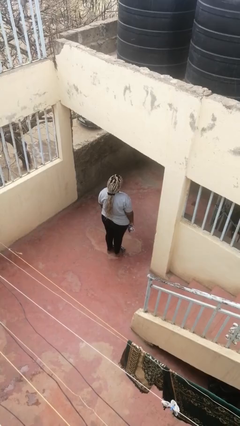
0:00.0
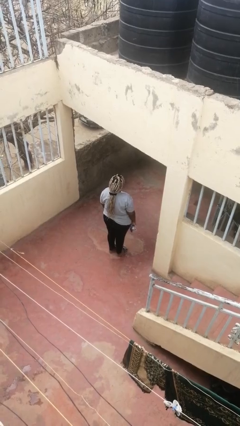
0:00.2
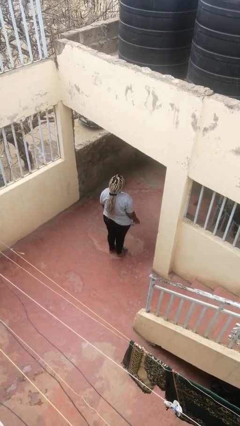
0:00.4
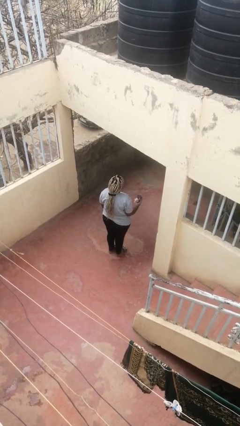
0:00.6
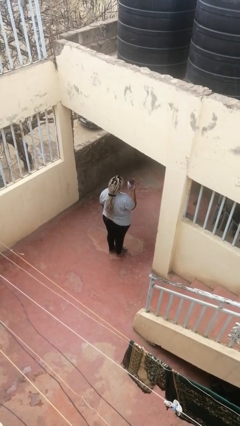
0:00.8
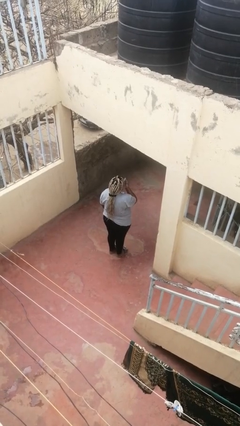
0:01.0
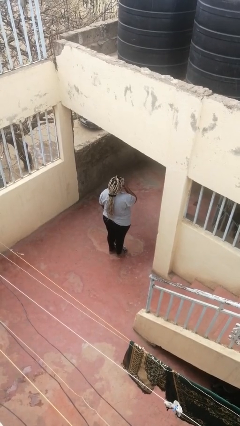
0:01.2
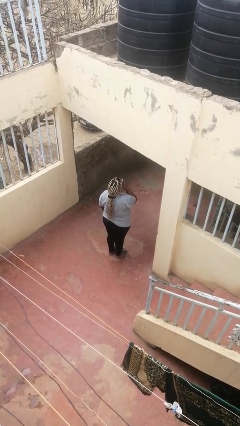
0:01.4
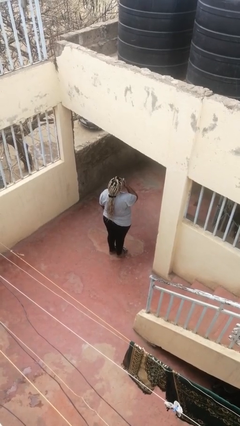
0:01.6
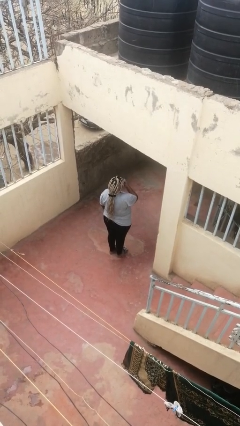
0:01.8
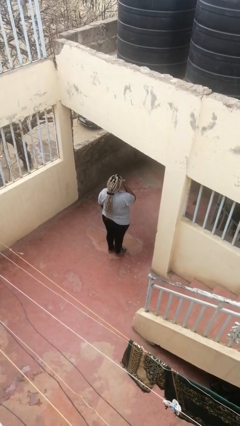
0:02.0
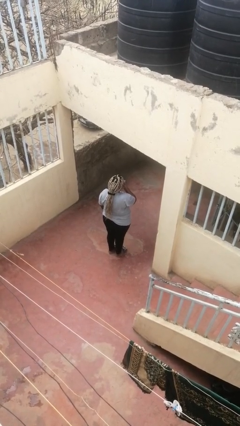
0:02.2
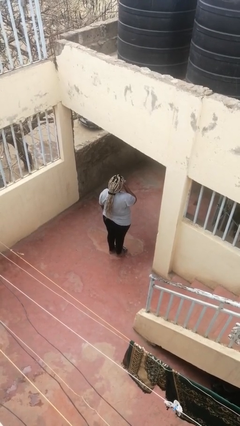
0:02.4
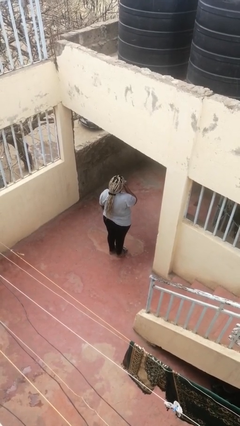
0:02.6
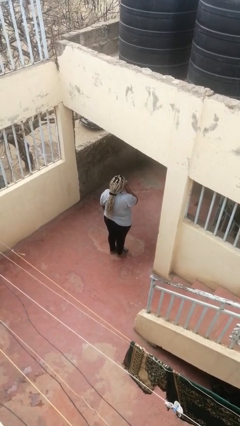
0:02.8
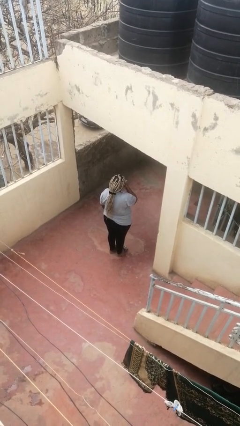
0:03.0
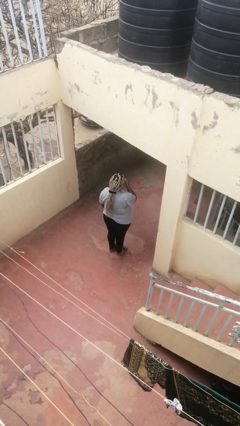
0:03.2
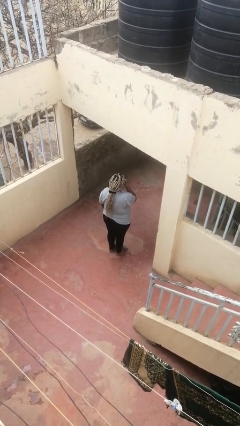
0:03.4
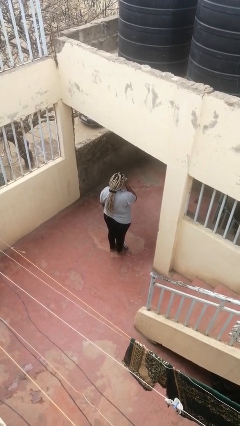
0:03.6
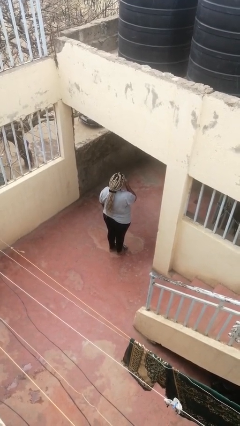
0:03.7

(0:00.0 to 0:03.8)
person blows nose

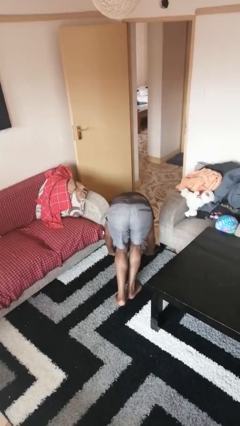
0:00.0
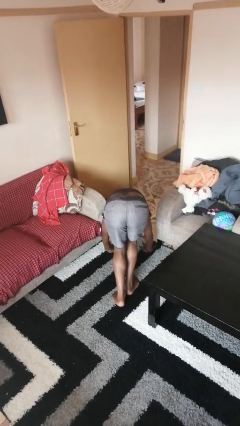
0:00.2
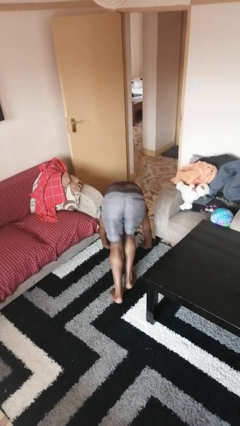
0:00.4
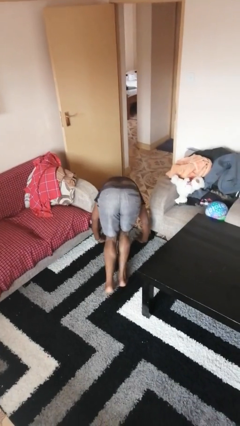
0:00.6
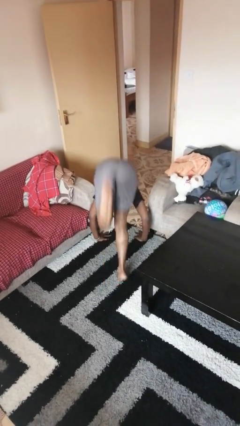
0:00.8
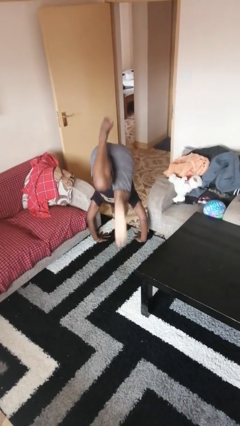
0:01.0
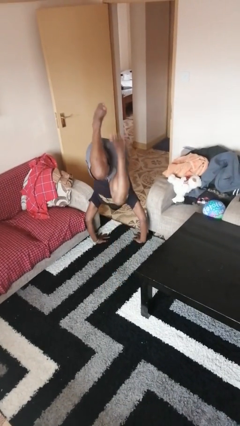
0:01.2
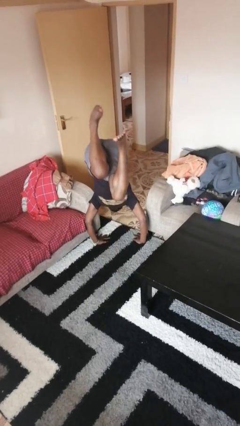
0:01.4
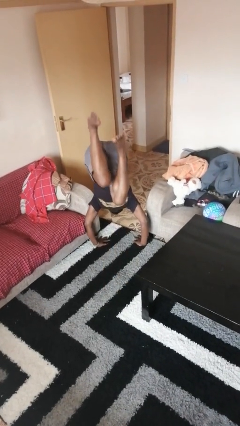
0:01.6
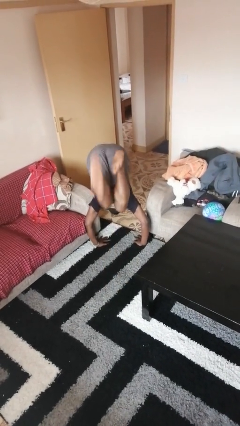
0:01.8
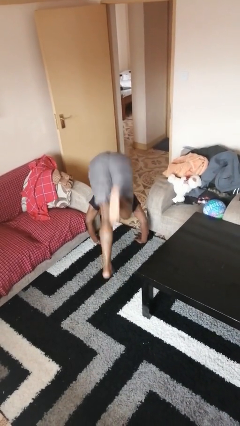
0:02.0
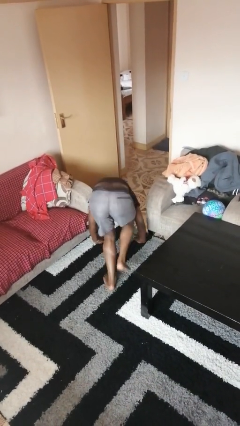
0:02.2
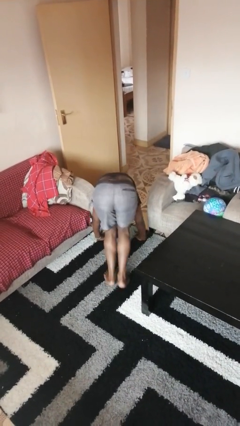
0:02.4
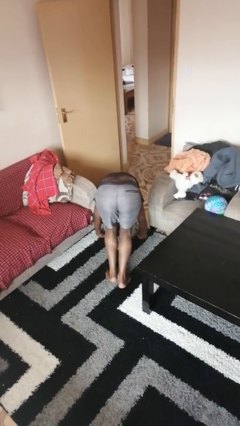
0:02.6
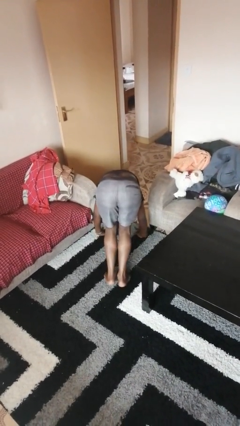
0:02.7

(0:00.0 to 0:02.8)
person handstand

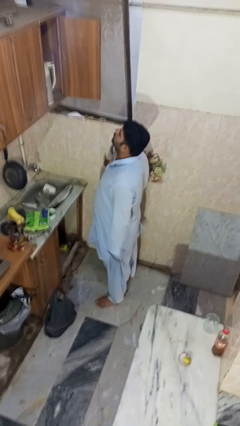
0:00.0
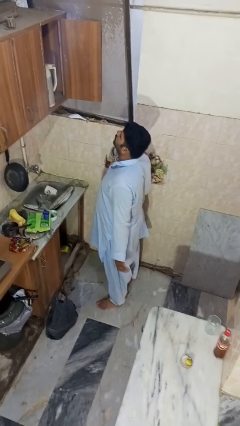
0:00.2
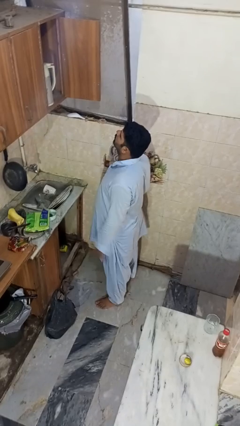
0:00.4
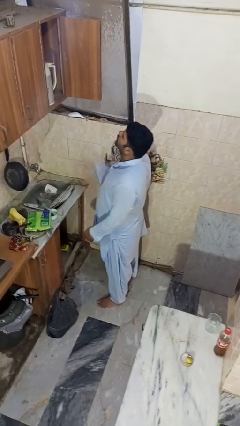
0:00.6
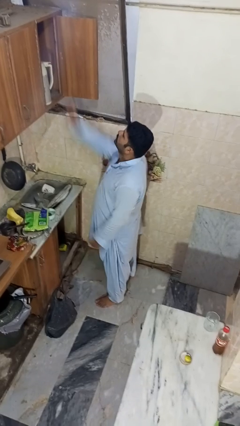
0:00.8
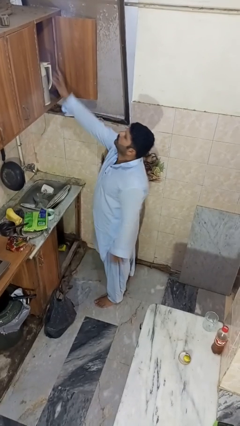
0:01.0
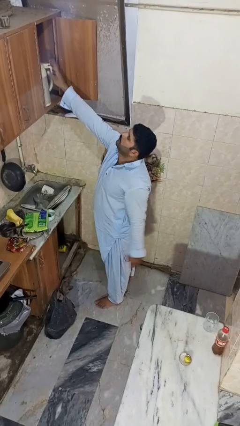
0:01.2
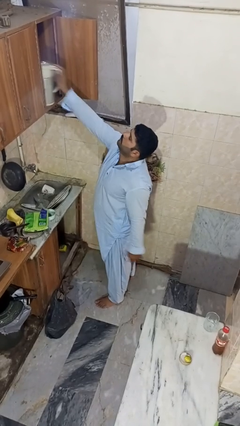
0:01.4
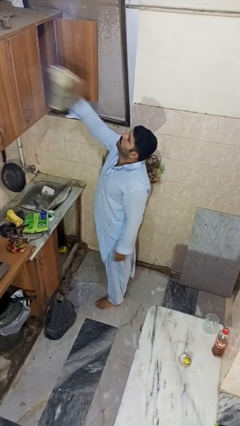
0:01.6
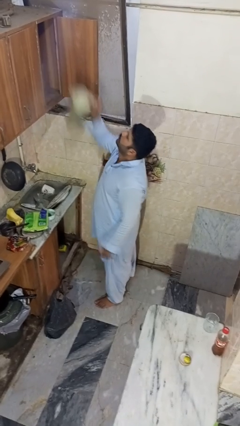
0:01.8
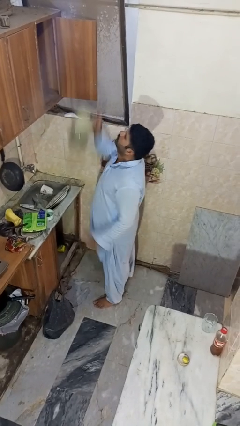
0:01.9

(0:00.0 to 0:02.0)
person takes object from cabinet

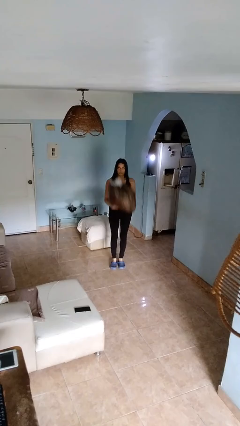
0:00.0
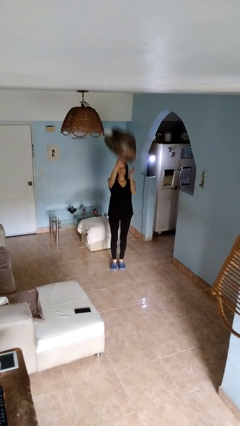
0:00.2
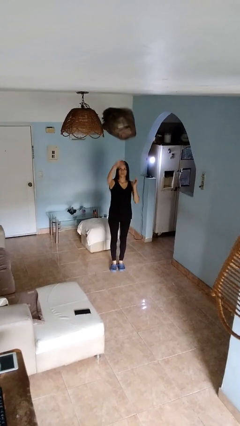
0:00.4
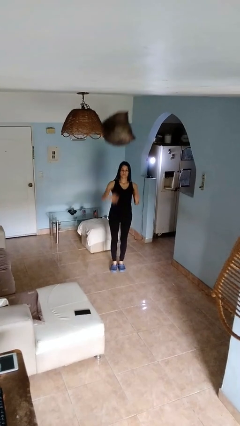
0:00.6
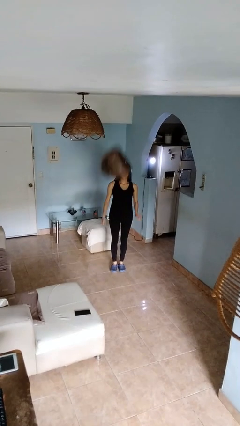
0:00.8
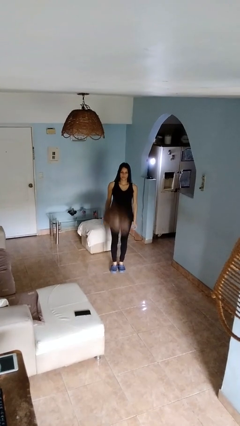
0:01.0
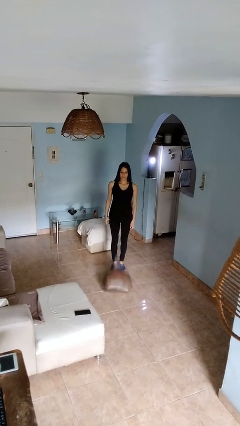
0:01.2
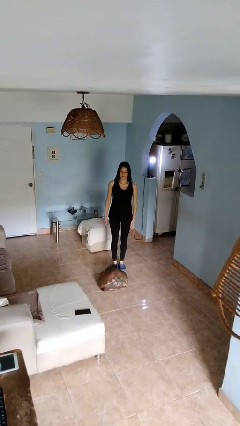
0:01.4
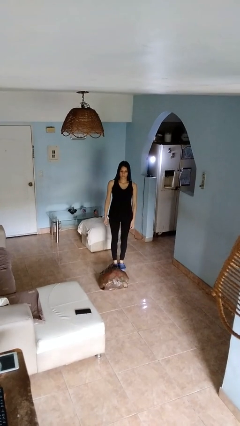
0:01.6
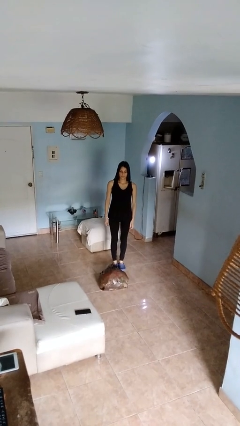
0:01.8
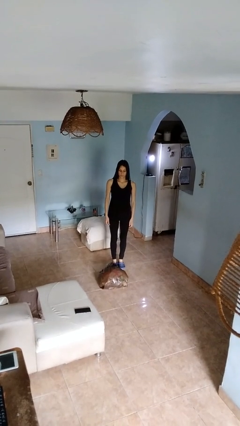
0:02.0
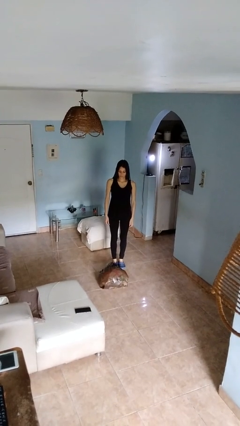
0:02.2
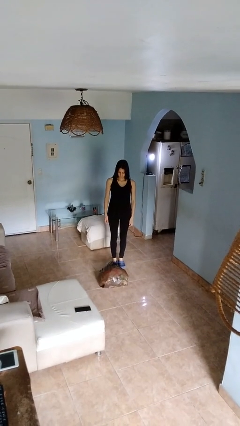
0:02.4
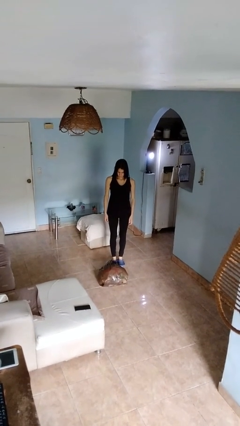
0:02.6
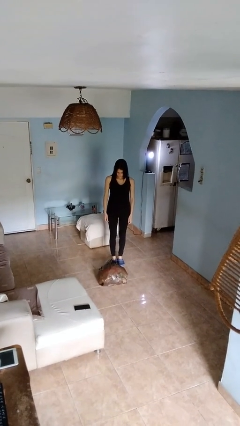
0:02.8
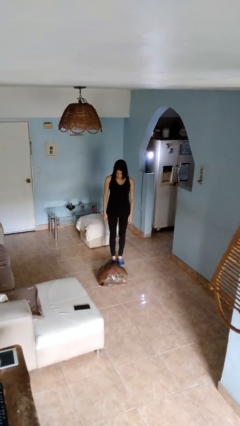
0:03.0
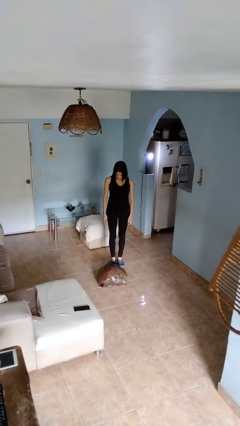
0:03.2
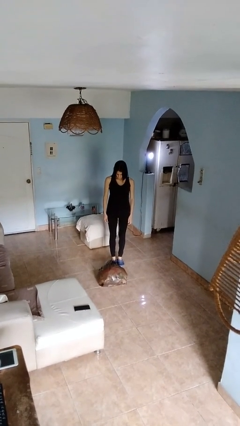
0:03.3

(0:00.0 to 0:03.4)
person throws object into air

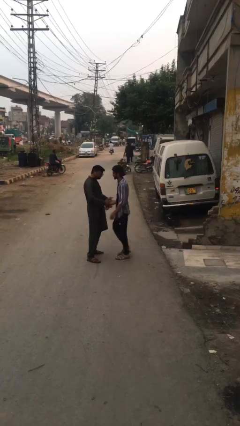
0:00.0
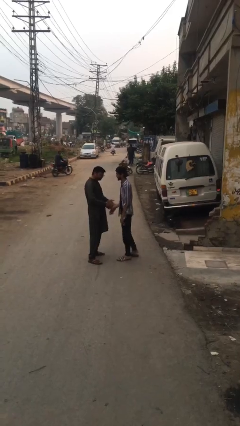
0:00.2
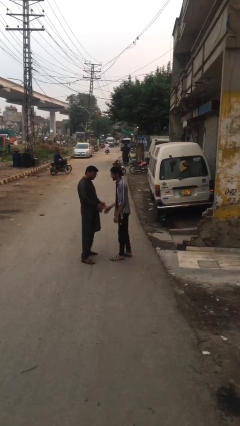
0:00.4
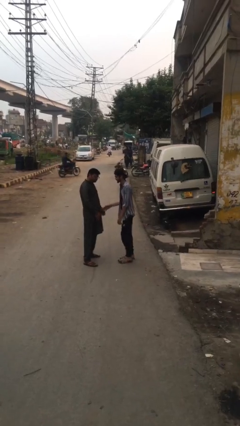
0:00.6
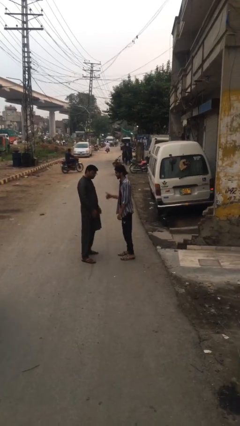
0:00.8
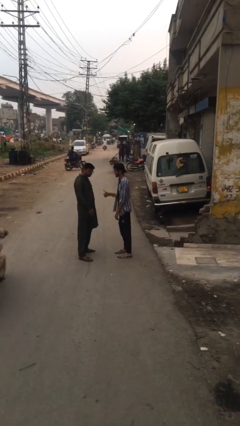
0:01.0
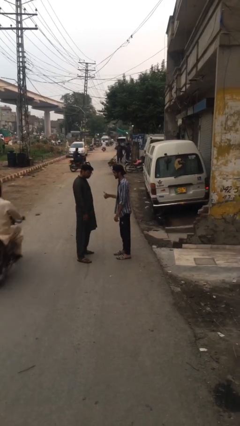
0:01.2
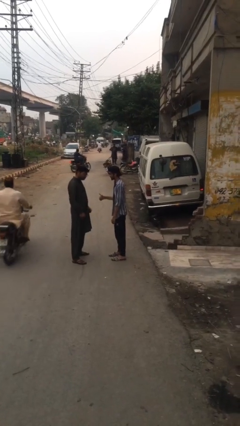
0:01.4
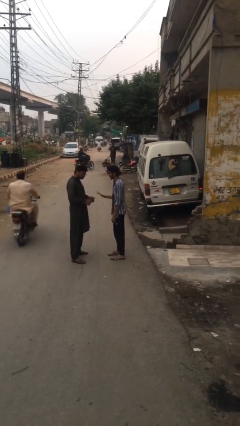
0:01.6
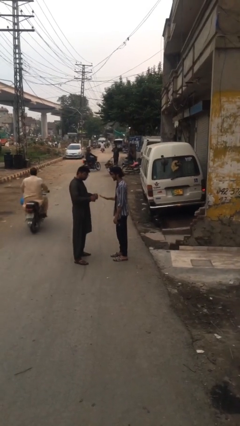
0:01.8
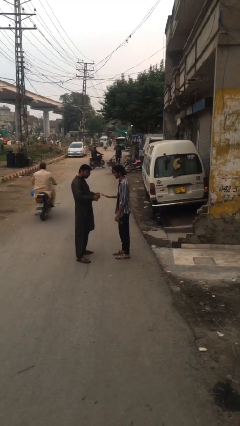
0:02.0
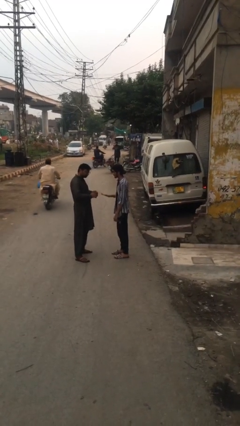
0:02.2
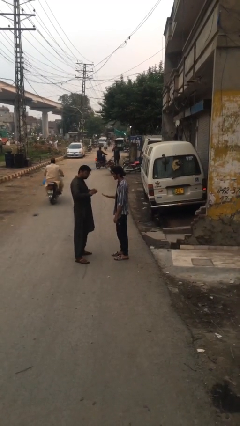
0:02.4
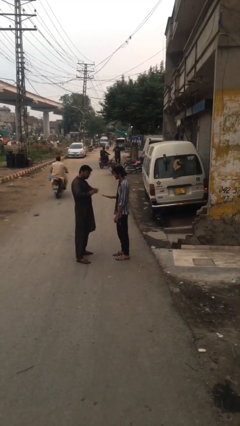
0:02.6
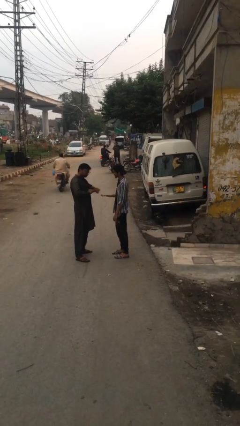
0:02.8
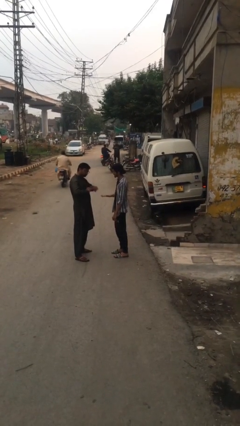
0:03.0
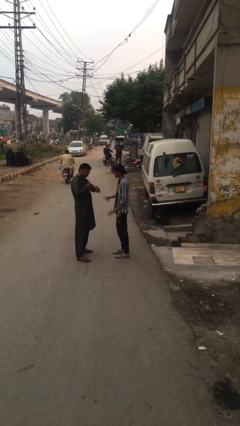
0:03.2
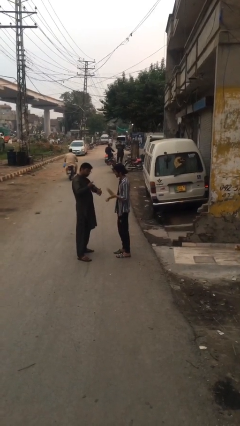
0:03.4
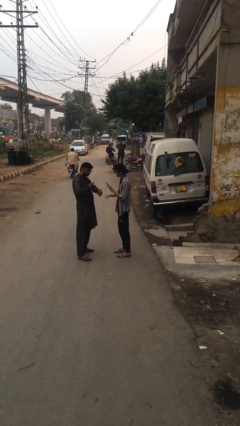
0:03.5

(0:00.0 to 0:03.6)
person talks to person

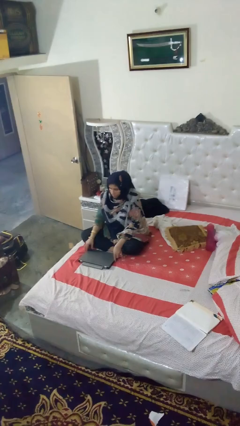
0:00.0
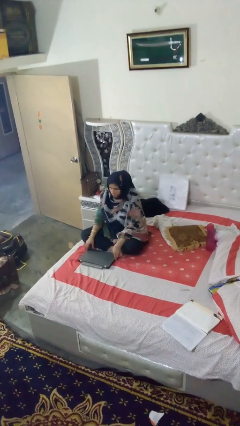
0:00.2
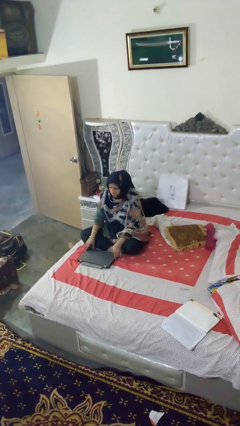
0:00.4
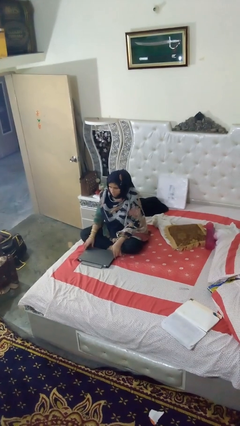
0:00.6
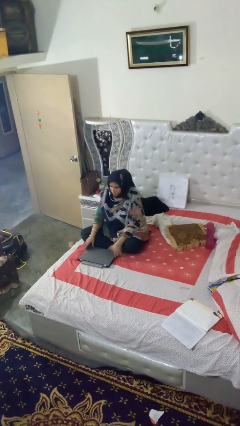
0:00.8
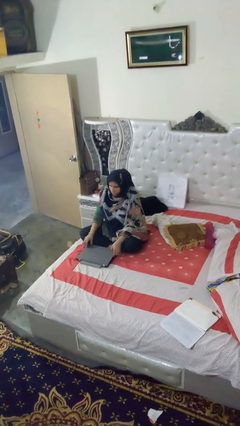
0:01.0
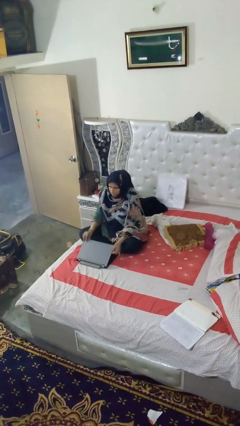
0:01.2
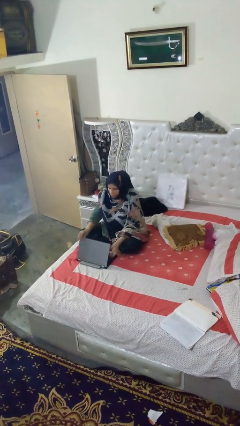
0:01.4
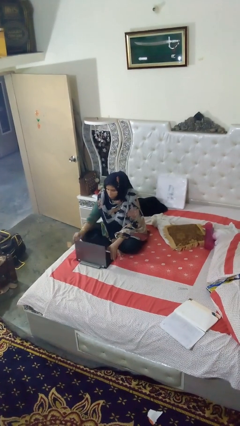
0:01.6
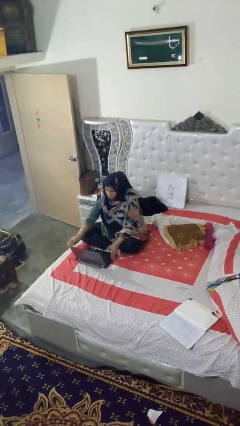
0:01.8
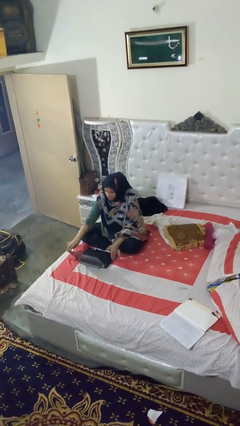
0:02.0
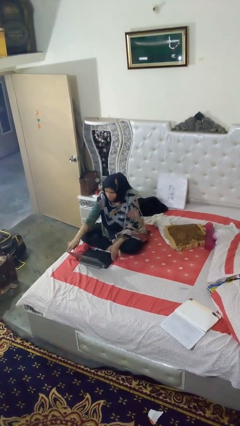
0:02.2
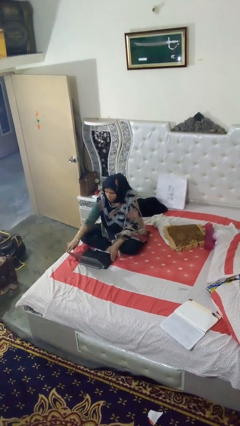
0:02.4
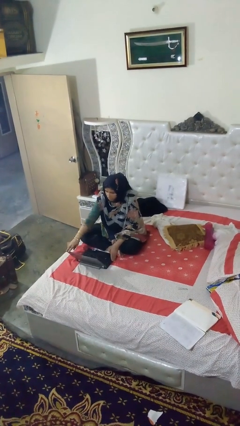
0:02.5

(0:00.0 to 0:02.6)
person opens laptop
